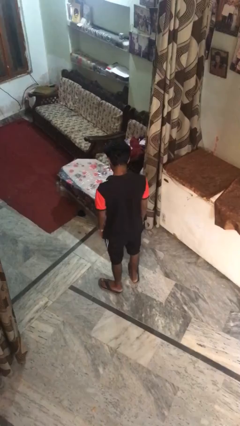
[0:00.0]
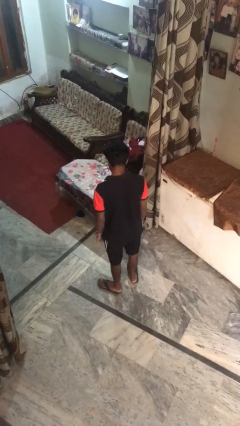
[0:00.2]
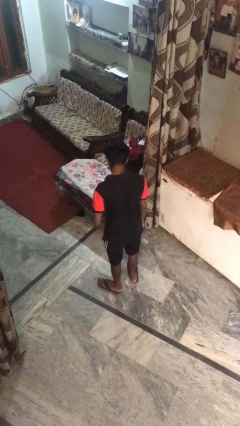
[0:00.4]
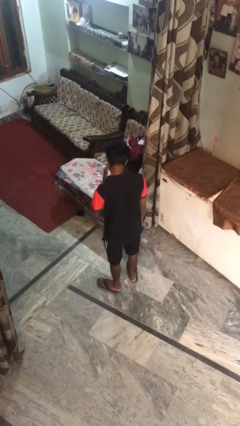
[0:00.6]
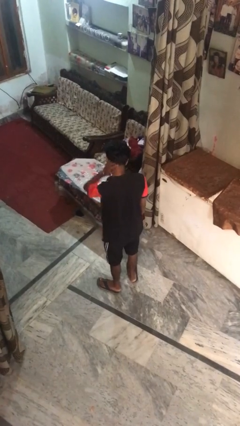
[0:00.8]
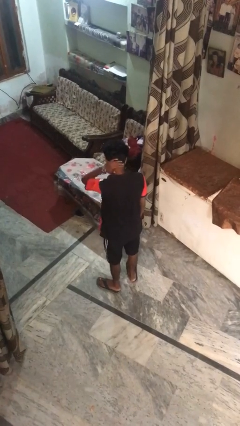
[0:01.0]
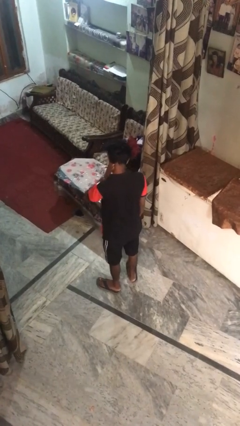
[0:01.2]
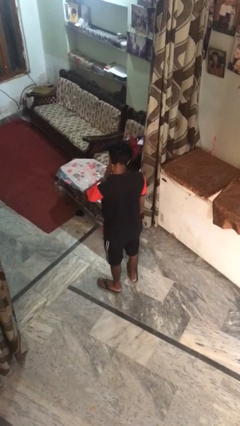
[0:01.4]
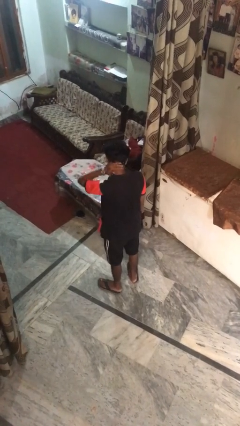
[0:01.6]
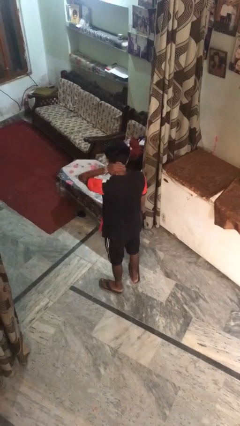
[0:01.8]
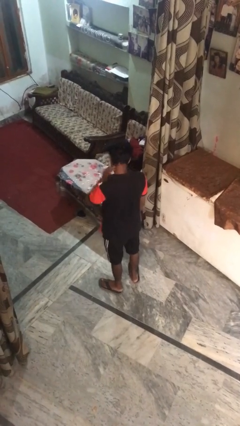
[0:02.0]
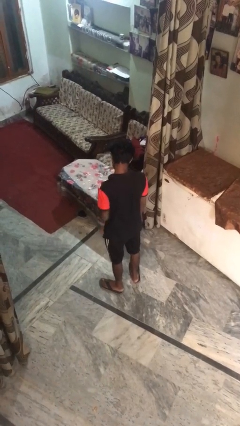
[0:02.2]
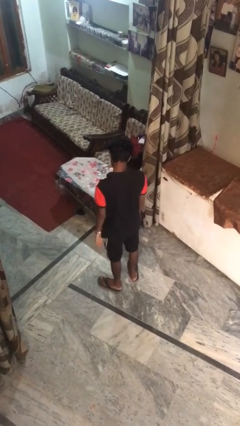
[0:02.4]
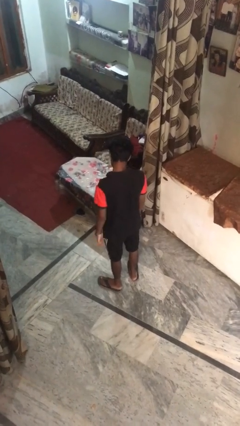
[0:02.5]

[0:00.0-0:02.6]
person rubs neck

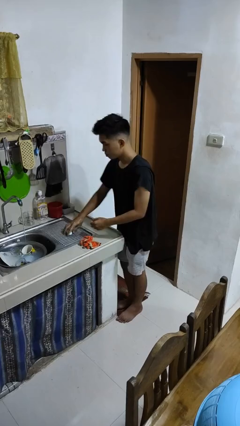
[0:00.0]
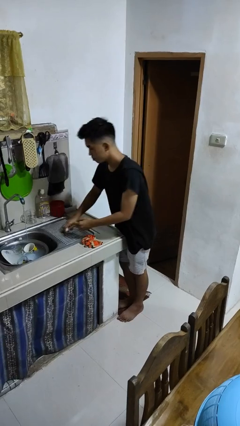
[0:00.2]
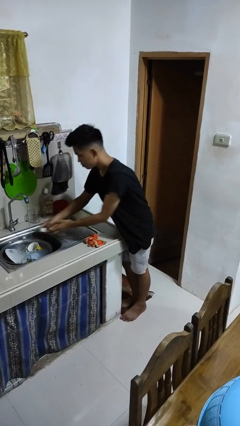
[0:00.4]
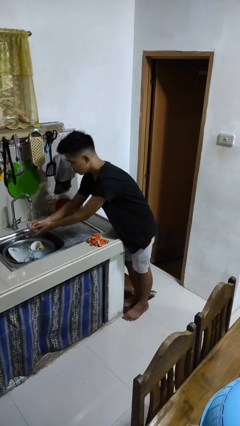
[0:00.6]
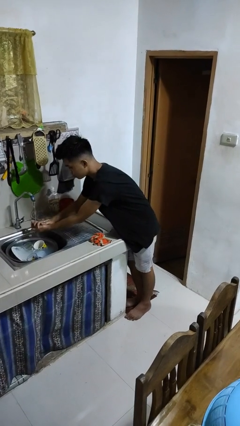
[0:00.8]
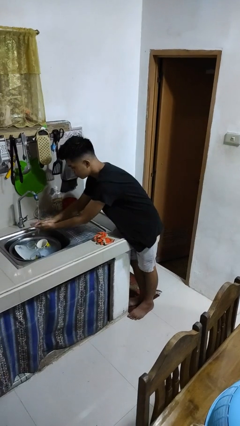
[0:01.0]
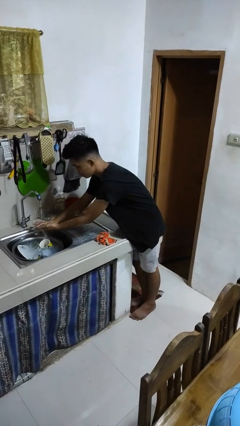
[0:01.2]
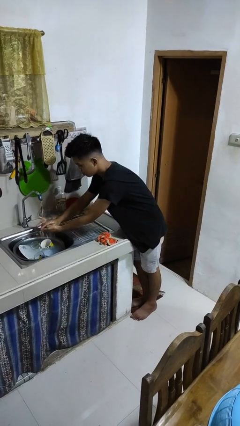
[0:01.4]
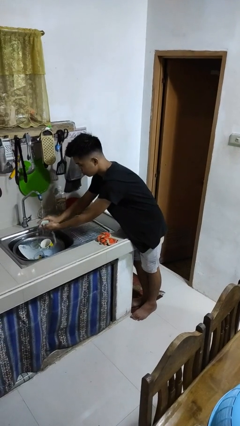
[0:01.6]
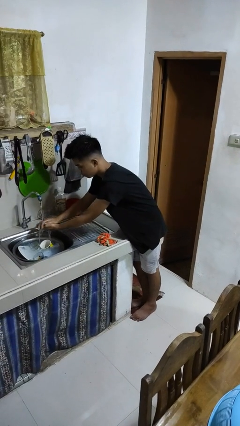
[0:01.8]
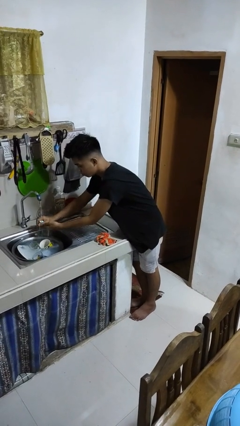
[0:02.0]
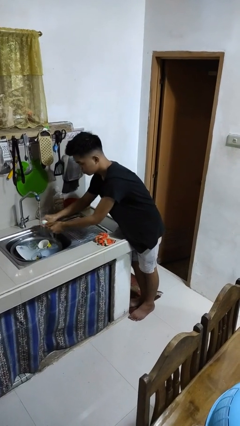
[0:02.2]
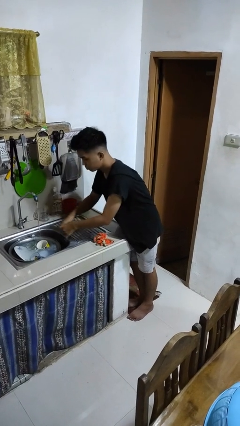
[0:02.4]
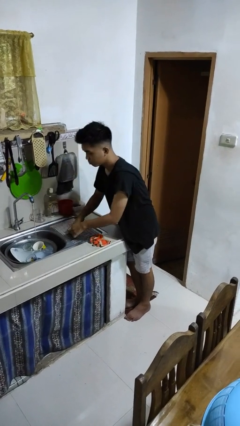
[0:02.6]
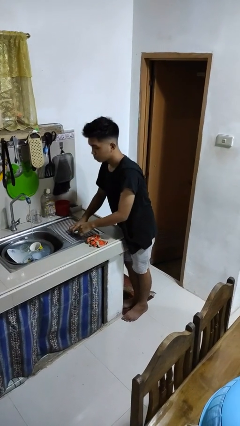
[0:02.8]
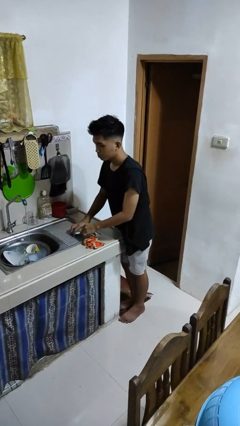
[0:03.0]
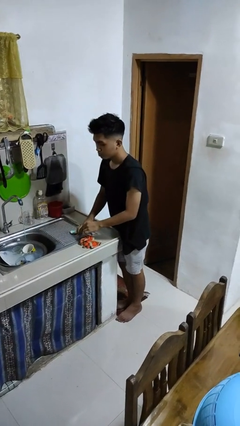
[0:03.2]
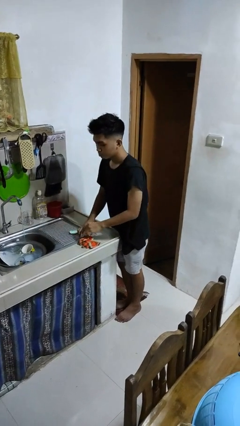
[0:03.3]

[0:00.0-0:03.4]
person washes hands

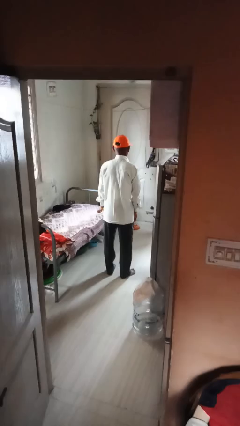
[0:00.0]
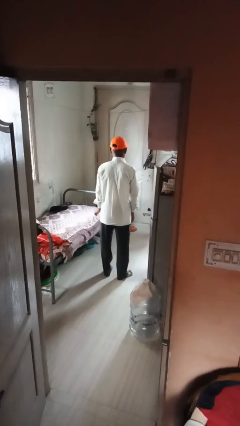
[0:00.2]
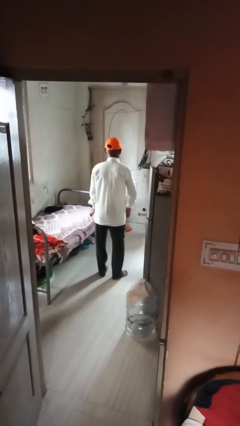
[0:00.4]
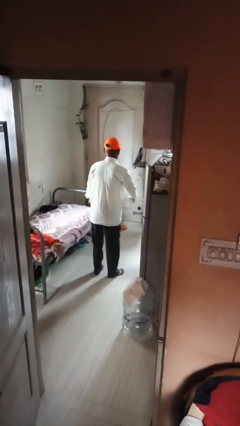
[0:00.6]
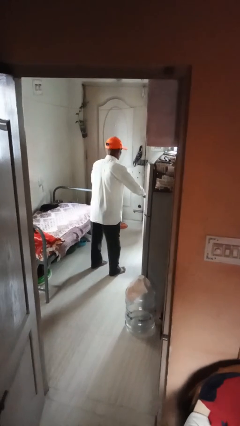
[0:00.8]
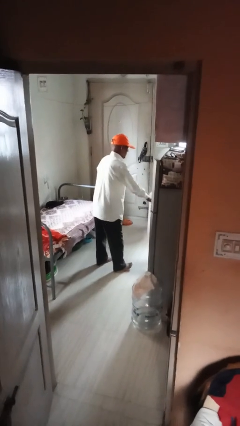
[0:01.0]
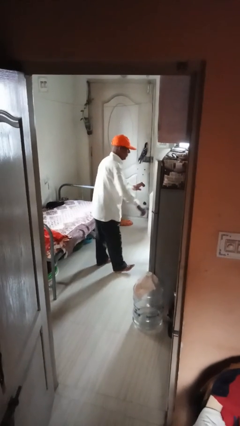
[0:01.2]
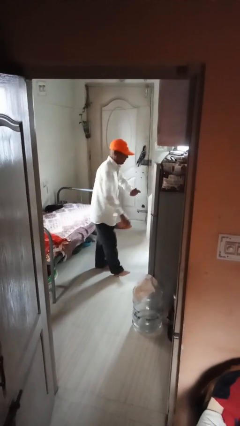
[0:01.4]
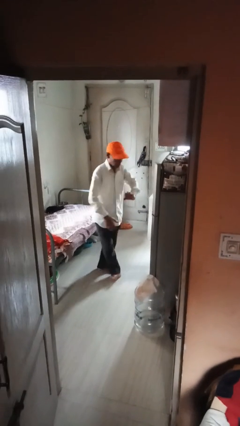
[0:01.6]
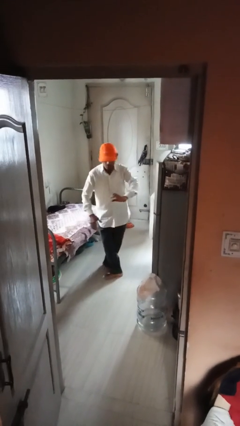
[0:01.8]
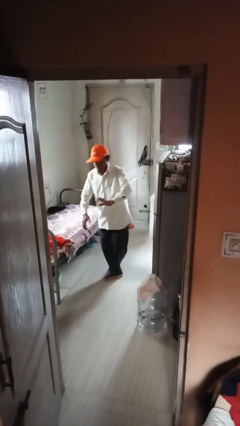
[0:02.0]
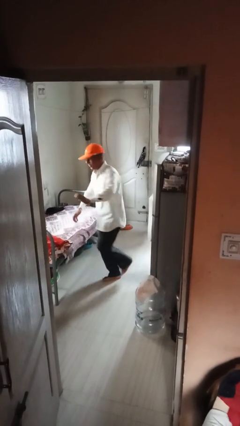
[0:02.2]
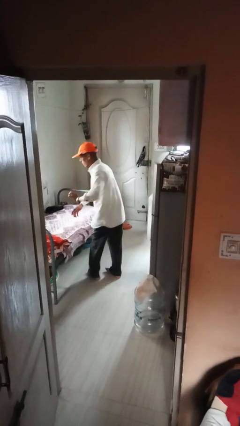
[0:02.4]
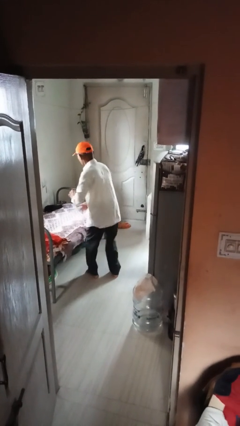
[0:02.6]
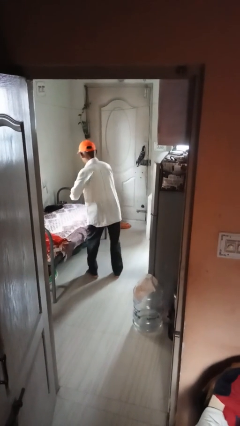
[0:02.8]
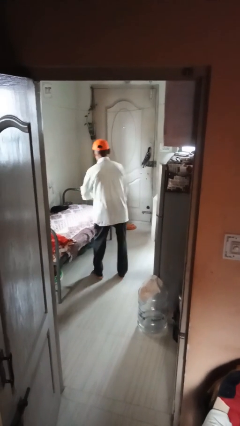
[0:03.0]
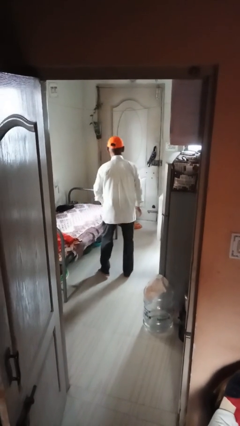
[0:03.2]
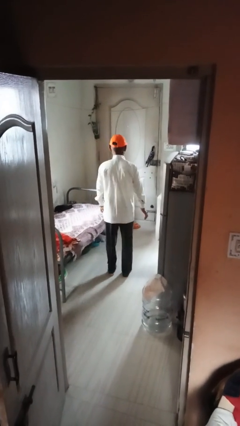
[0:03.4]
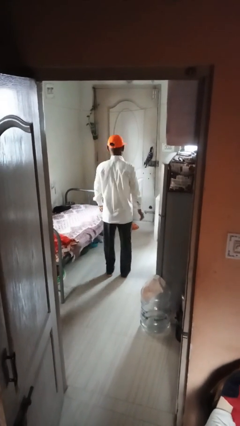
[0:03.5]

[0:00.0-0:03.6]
person twirls

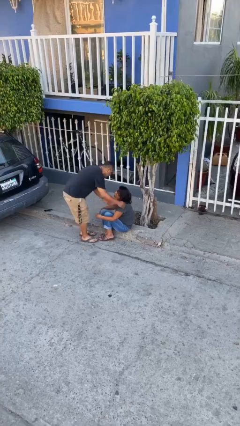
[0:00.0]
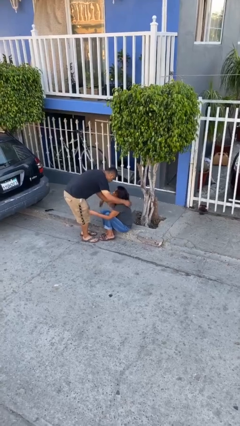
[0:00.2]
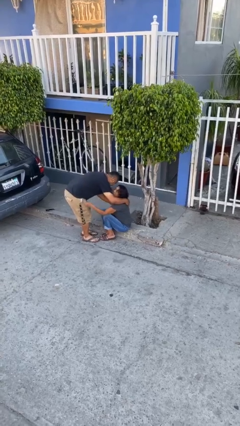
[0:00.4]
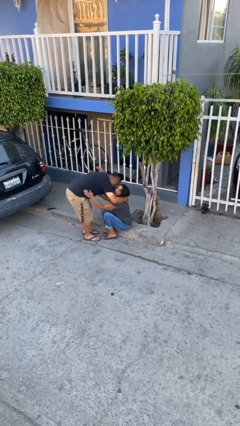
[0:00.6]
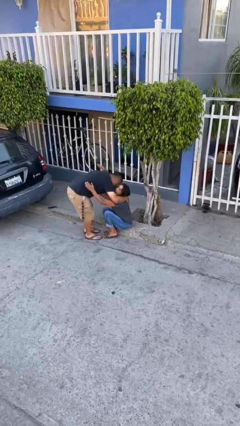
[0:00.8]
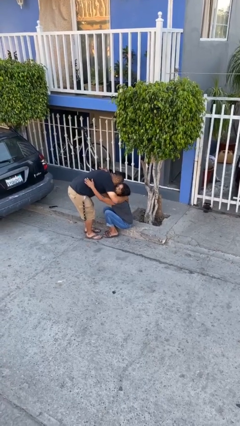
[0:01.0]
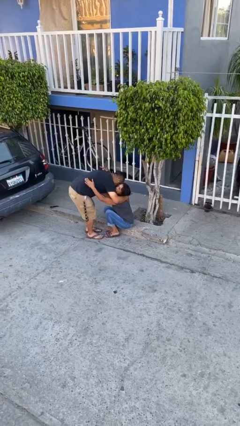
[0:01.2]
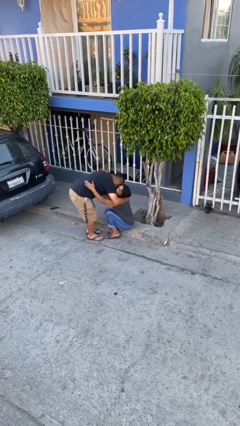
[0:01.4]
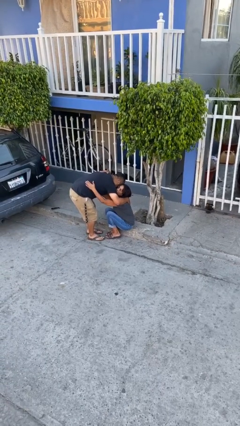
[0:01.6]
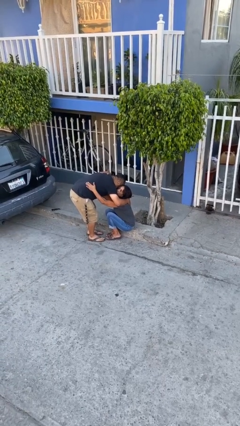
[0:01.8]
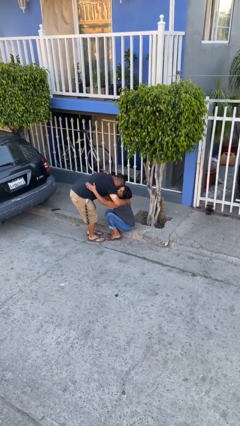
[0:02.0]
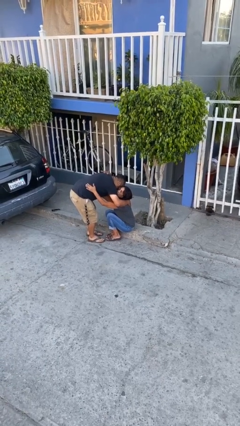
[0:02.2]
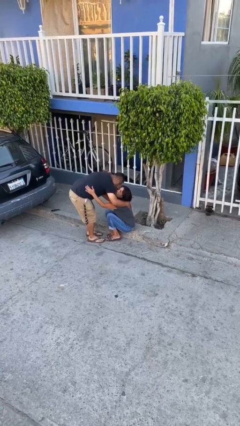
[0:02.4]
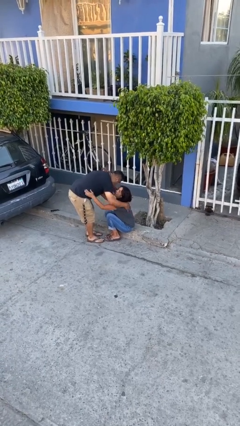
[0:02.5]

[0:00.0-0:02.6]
person embraces person

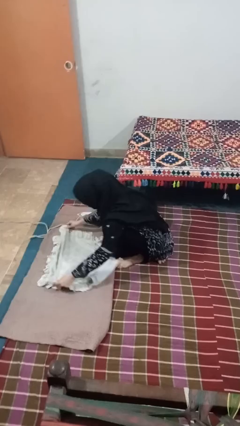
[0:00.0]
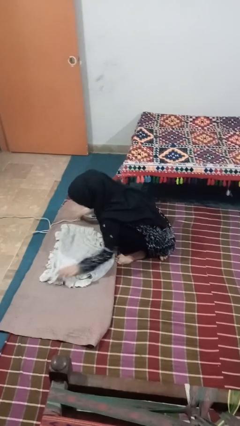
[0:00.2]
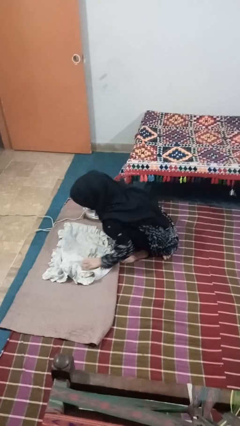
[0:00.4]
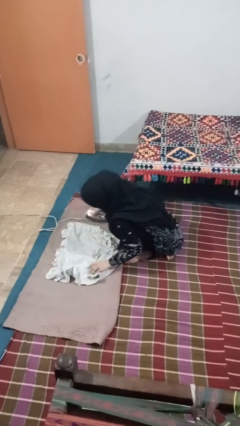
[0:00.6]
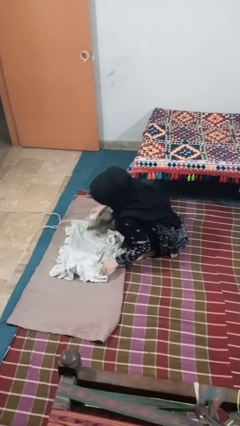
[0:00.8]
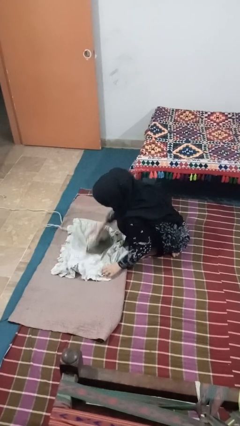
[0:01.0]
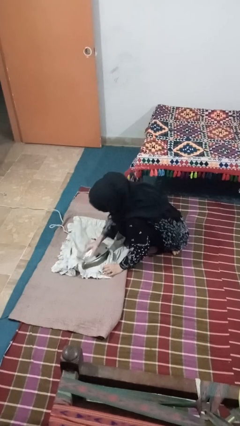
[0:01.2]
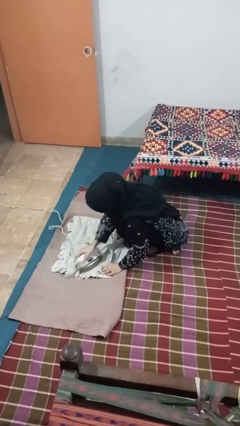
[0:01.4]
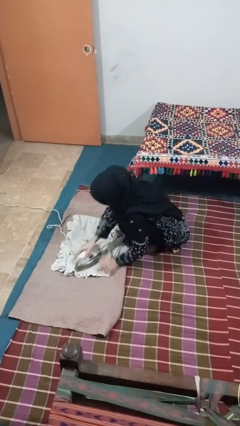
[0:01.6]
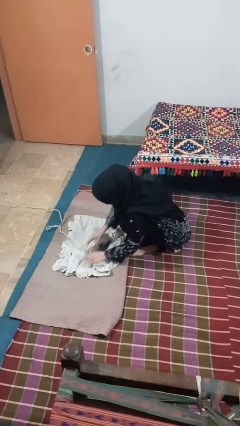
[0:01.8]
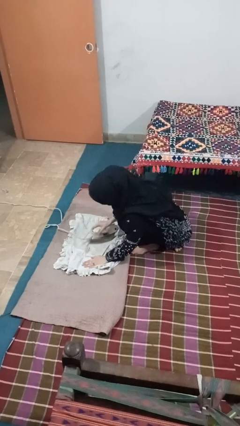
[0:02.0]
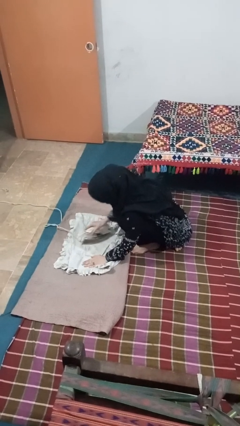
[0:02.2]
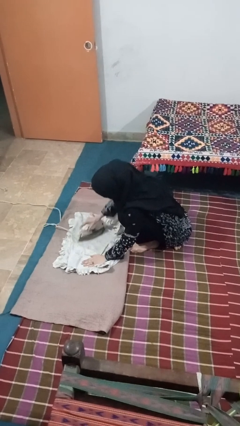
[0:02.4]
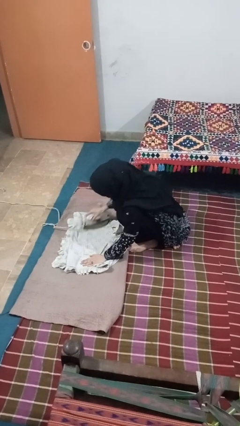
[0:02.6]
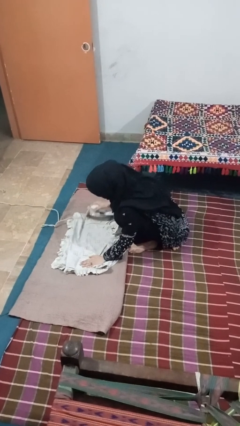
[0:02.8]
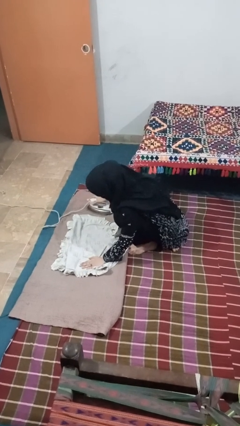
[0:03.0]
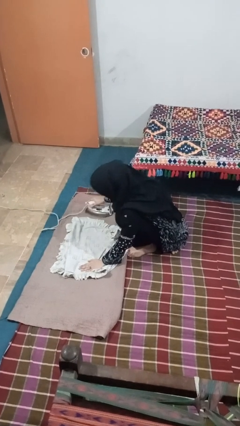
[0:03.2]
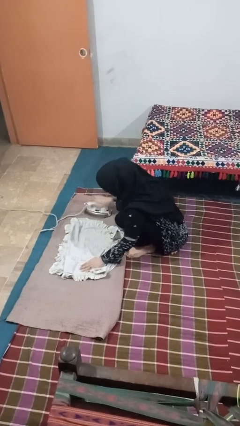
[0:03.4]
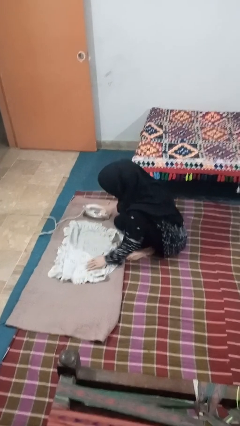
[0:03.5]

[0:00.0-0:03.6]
person irons clothes

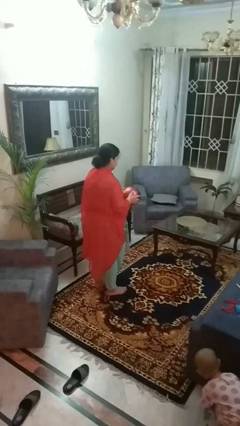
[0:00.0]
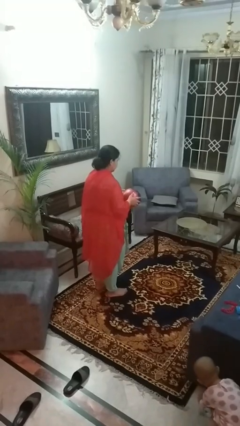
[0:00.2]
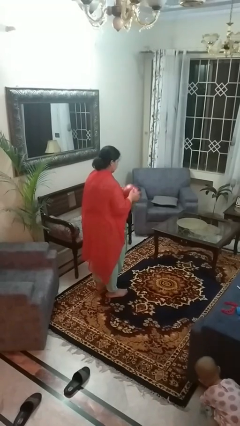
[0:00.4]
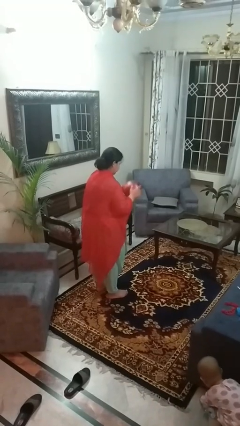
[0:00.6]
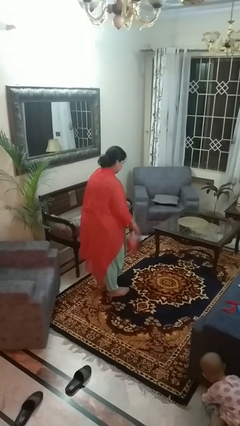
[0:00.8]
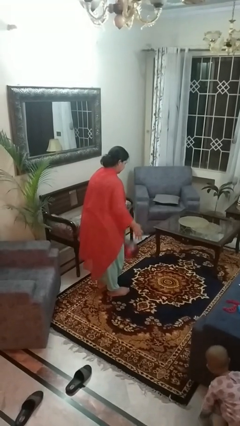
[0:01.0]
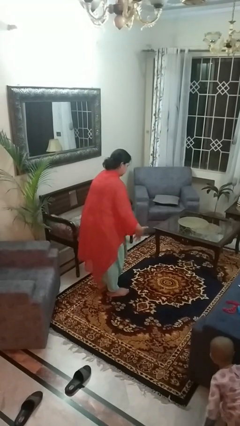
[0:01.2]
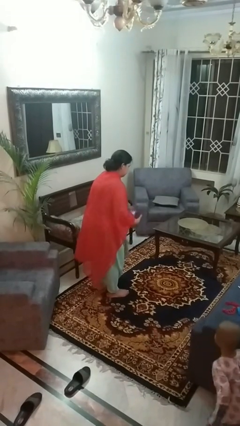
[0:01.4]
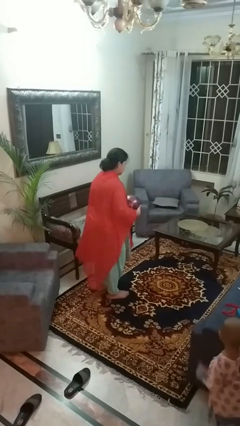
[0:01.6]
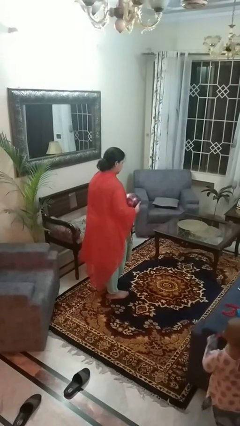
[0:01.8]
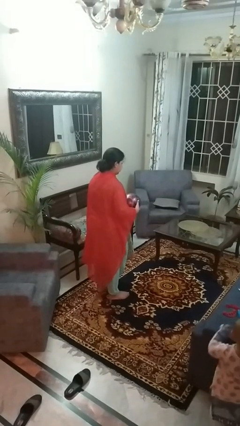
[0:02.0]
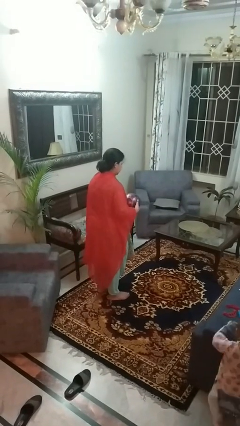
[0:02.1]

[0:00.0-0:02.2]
person bounces ball on floor
